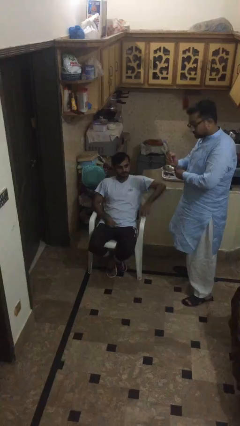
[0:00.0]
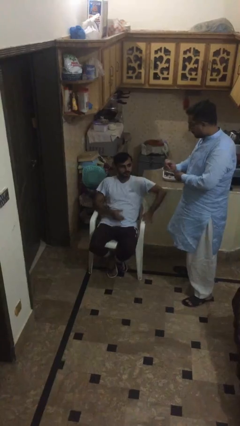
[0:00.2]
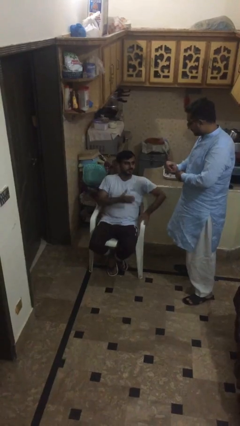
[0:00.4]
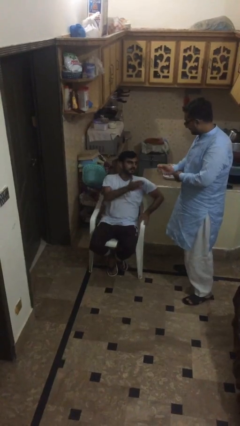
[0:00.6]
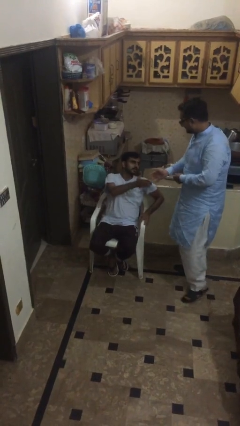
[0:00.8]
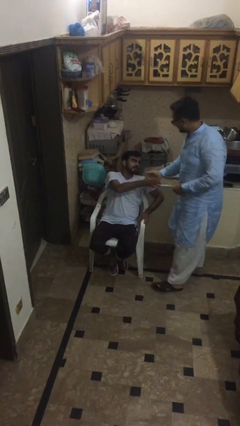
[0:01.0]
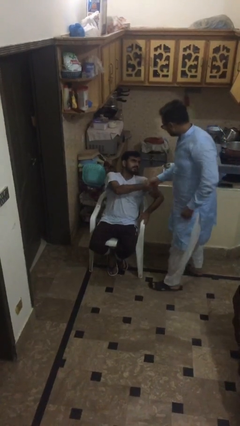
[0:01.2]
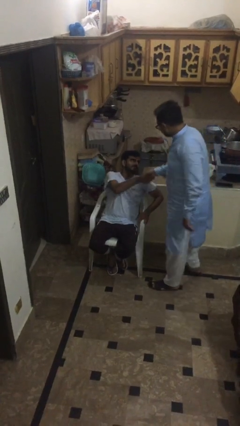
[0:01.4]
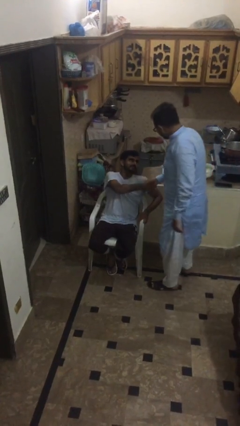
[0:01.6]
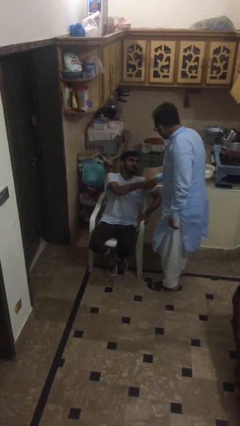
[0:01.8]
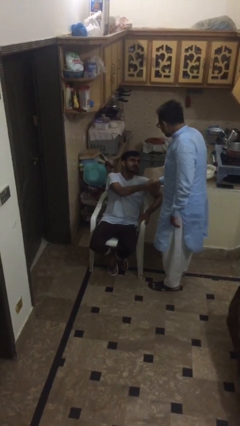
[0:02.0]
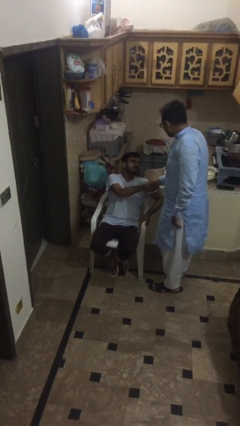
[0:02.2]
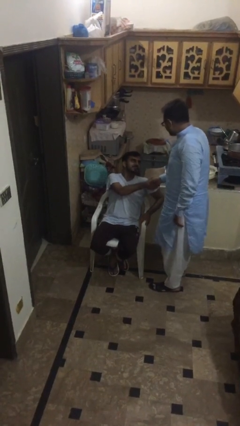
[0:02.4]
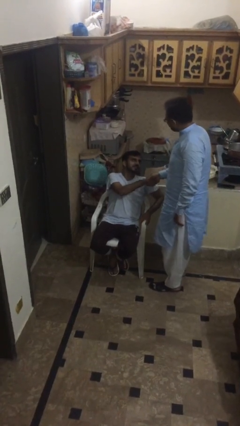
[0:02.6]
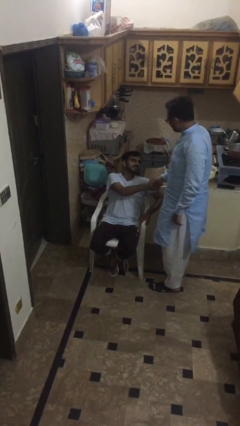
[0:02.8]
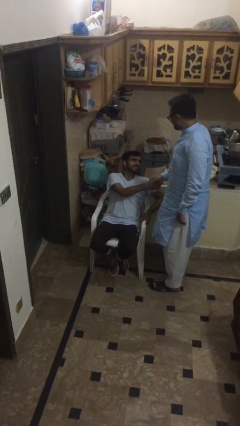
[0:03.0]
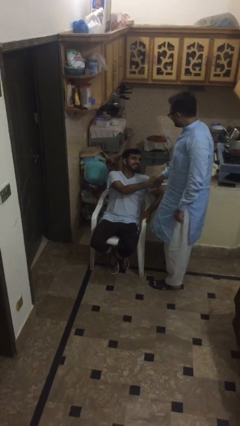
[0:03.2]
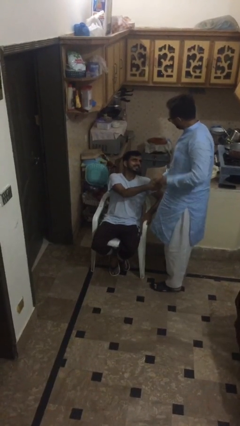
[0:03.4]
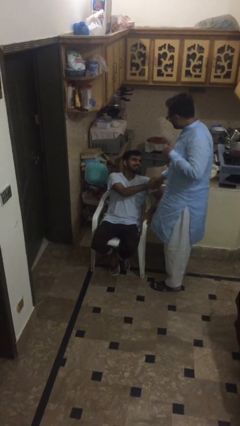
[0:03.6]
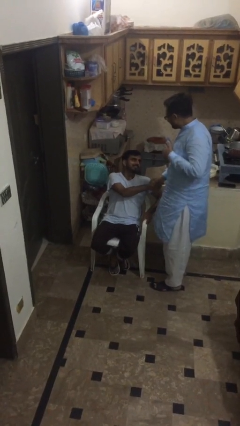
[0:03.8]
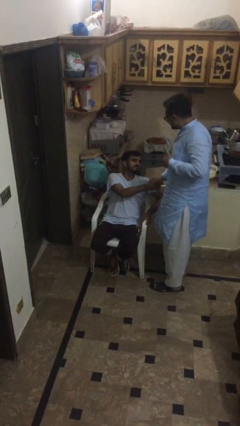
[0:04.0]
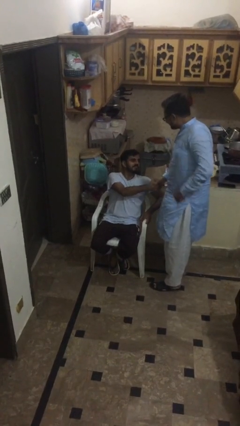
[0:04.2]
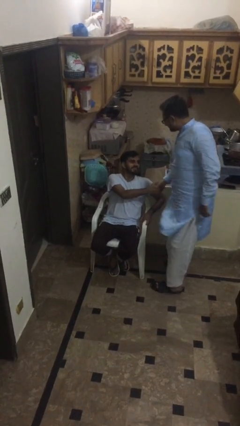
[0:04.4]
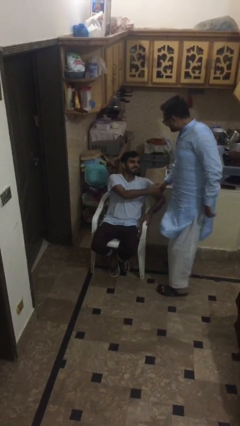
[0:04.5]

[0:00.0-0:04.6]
person shakes hand

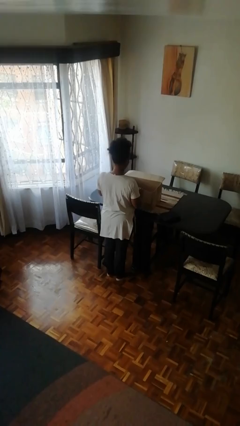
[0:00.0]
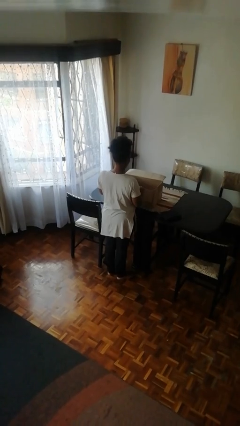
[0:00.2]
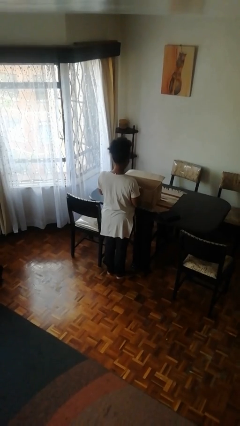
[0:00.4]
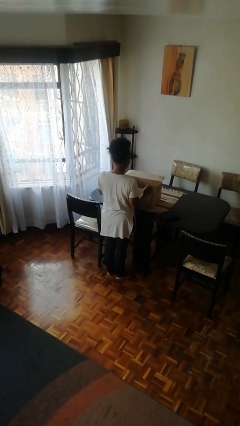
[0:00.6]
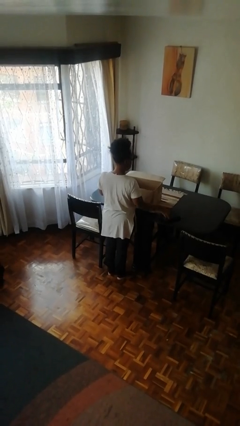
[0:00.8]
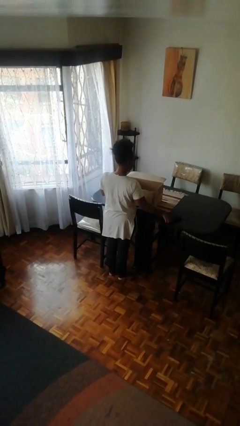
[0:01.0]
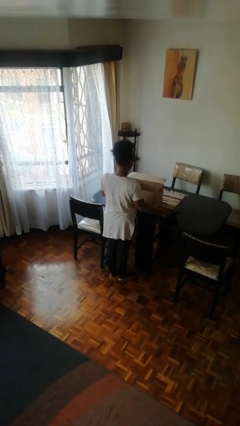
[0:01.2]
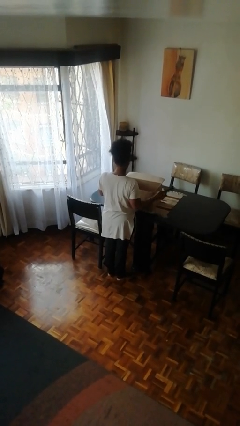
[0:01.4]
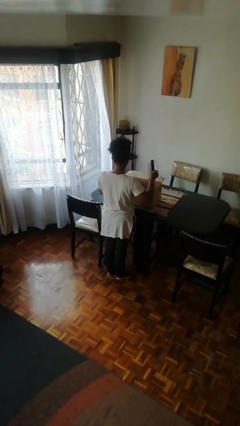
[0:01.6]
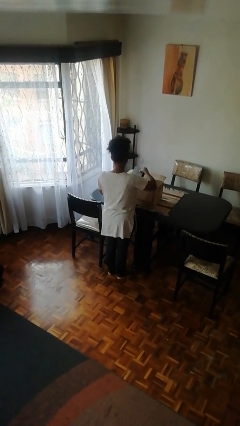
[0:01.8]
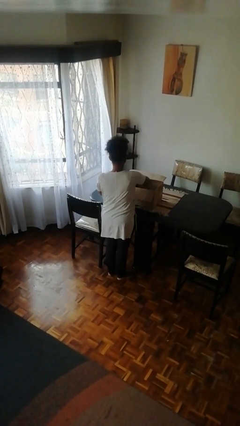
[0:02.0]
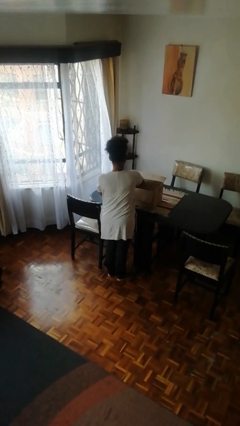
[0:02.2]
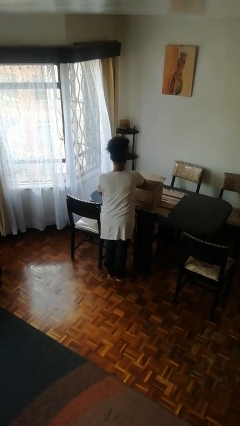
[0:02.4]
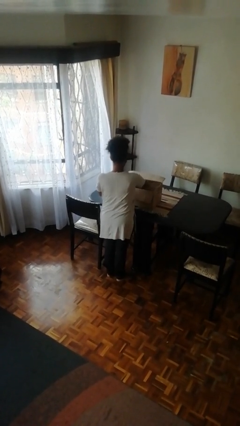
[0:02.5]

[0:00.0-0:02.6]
person puts object into box

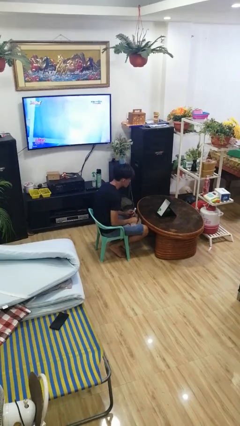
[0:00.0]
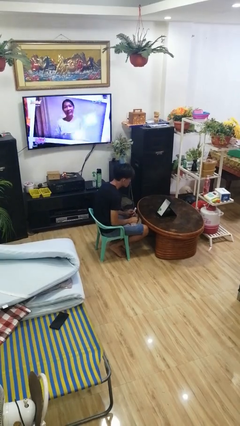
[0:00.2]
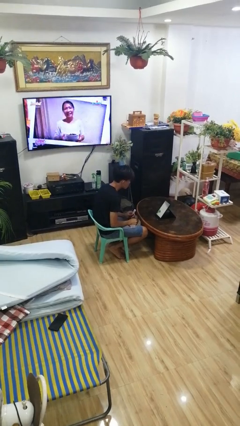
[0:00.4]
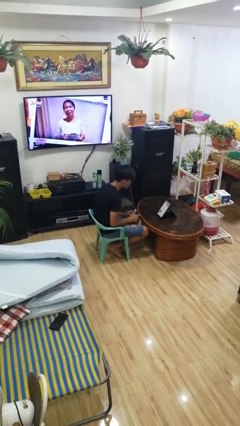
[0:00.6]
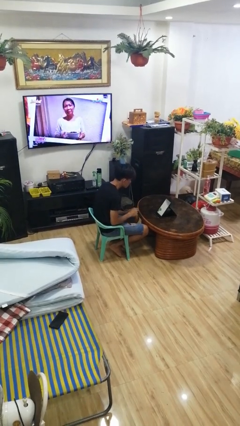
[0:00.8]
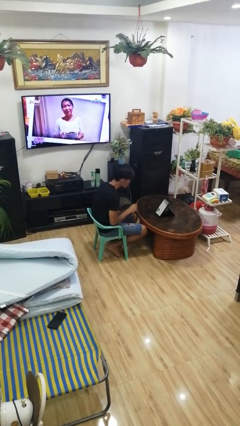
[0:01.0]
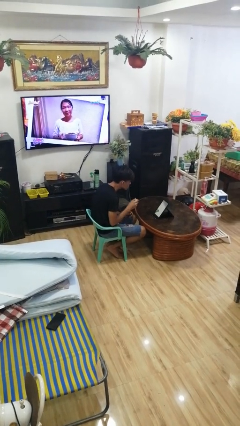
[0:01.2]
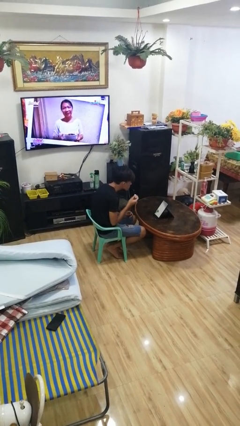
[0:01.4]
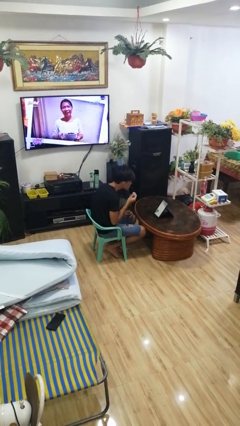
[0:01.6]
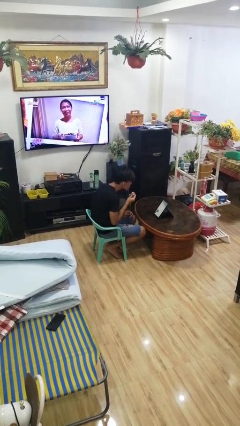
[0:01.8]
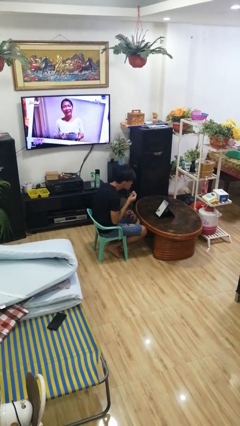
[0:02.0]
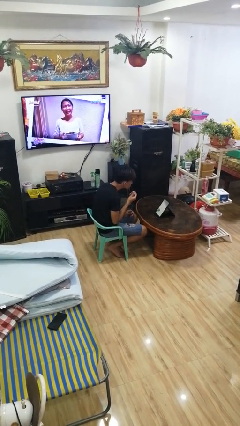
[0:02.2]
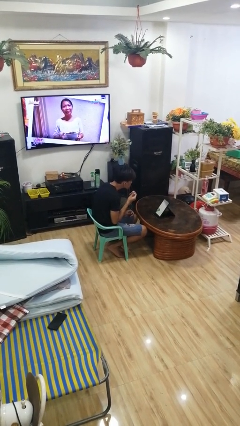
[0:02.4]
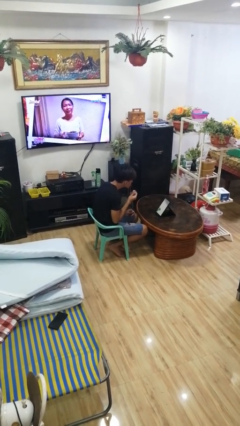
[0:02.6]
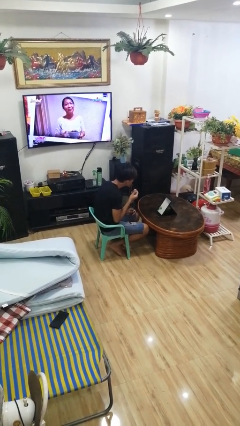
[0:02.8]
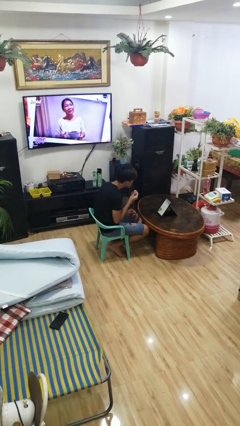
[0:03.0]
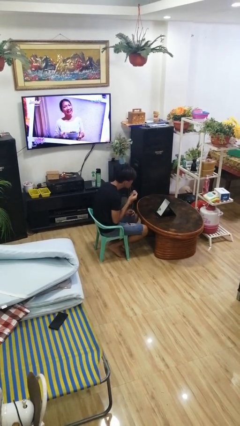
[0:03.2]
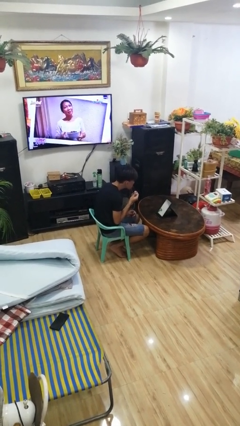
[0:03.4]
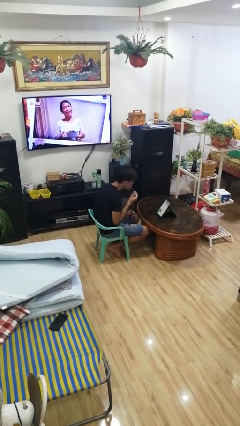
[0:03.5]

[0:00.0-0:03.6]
person applies lip makeup

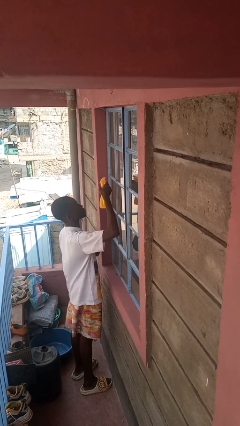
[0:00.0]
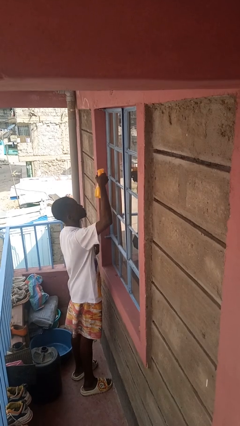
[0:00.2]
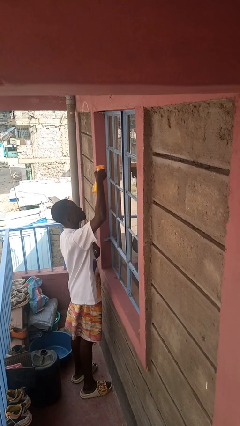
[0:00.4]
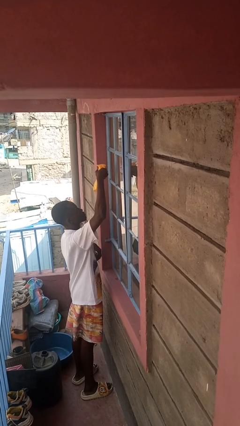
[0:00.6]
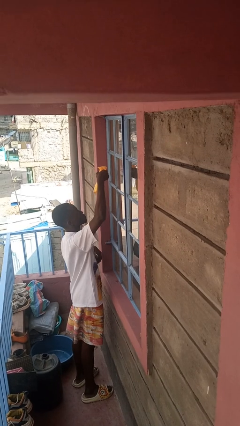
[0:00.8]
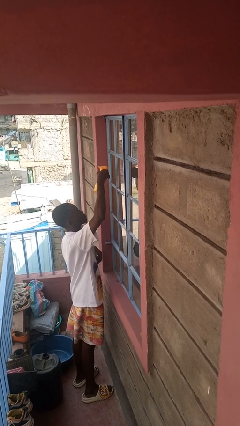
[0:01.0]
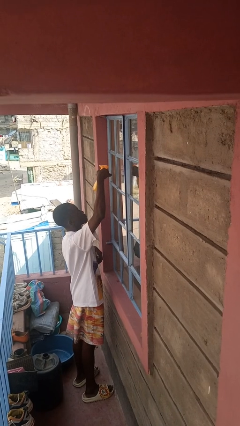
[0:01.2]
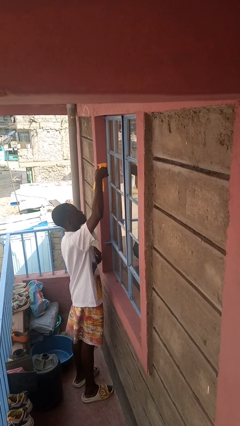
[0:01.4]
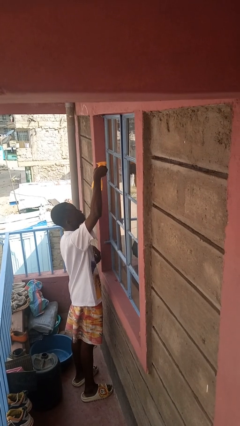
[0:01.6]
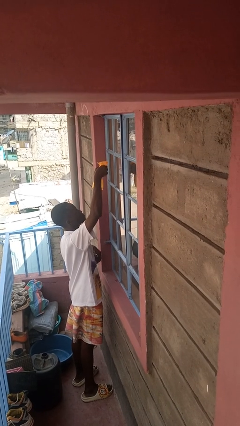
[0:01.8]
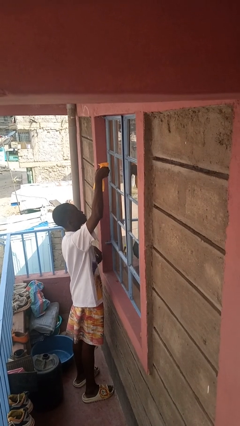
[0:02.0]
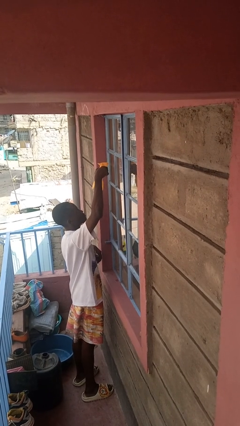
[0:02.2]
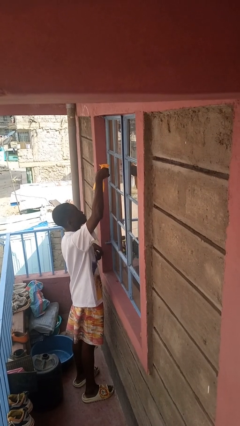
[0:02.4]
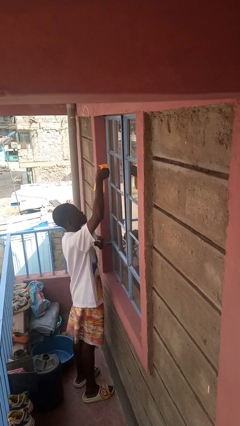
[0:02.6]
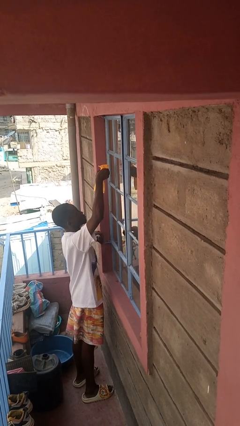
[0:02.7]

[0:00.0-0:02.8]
person sprays from bottle

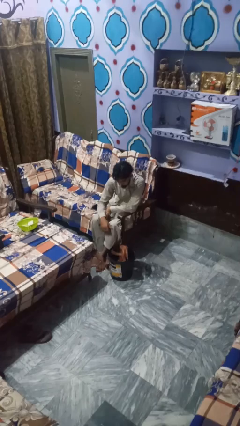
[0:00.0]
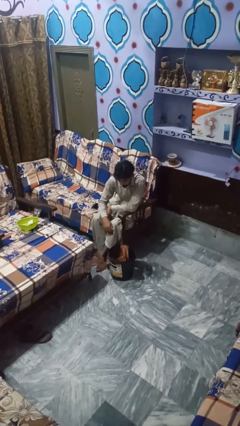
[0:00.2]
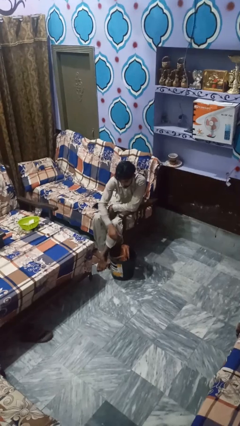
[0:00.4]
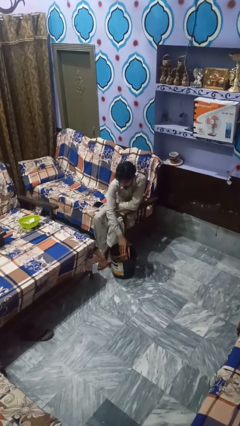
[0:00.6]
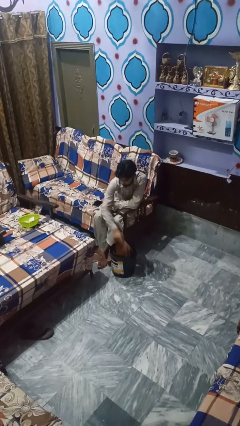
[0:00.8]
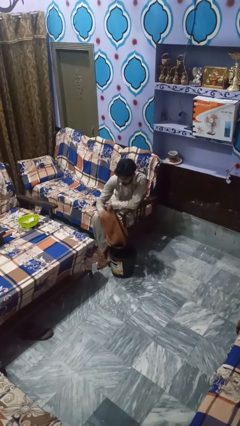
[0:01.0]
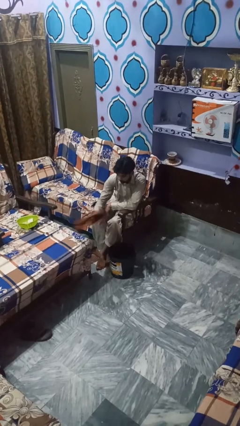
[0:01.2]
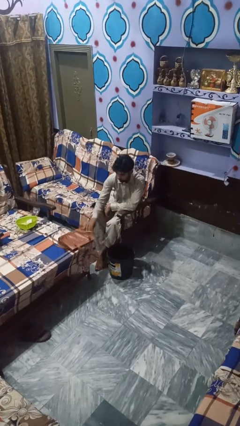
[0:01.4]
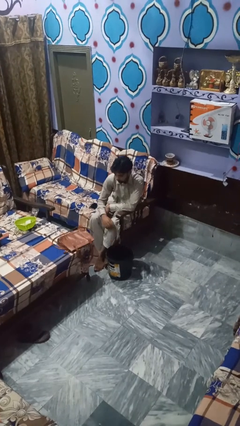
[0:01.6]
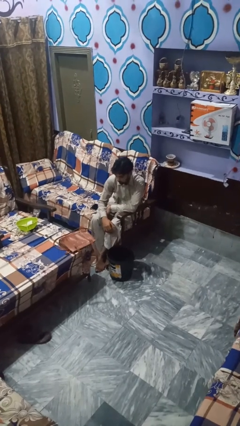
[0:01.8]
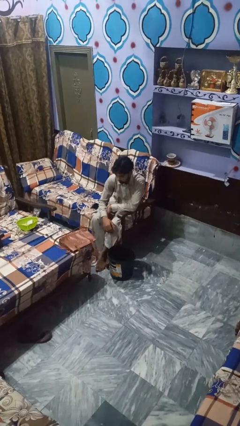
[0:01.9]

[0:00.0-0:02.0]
person takes object from basket

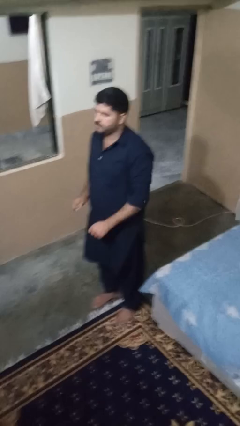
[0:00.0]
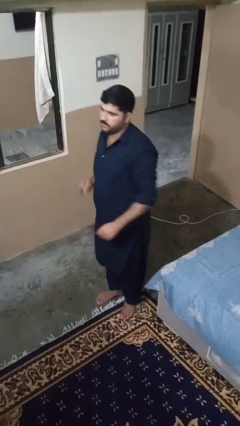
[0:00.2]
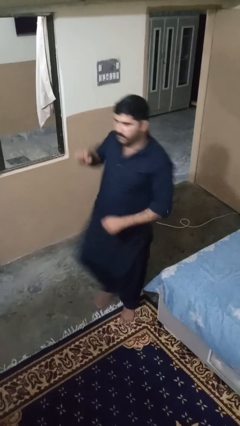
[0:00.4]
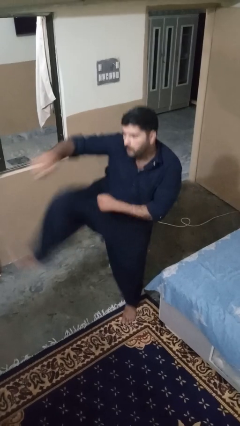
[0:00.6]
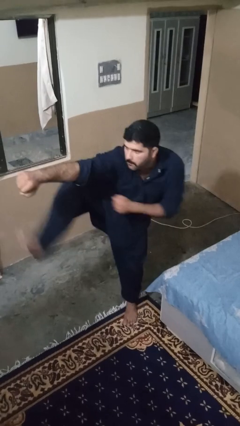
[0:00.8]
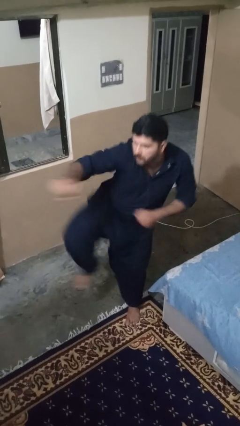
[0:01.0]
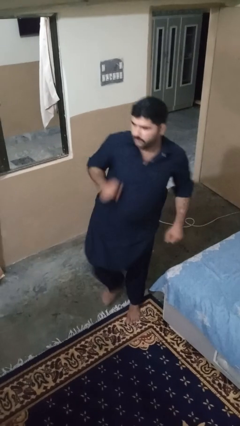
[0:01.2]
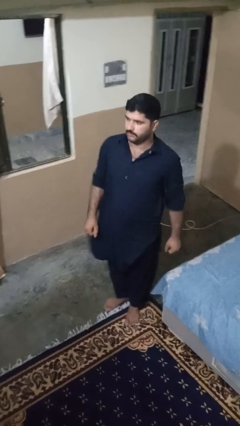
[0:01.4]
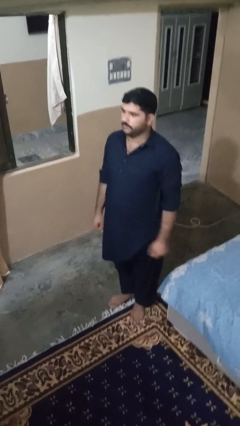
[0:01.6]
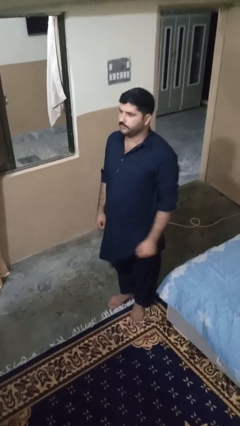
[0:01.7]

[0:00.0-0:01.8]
person karate chop
